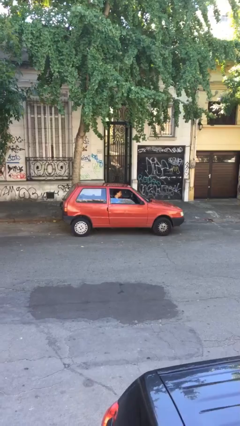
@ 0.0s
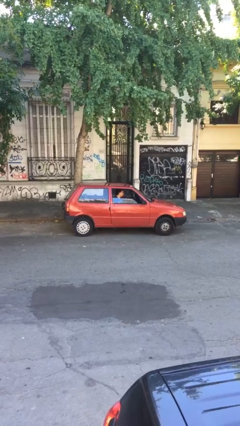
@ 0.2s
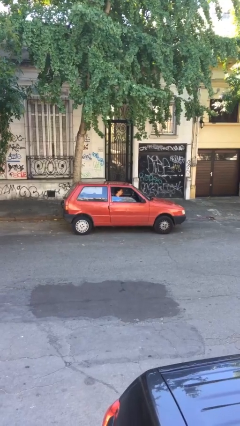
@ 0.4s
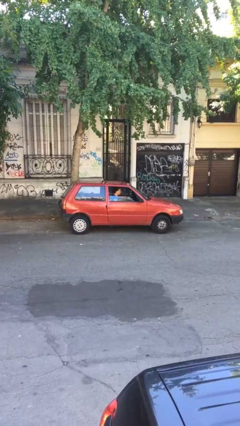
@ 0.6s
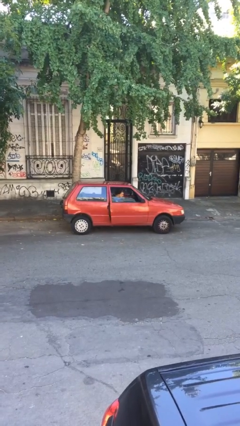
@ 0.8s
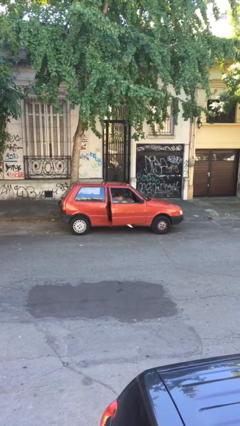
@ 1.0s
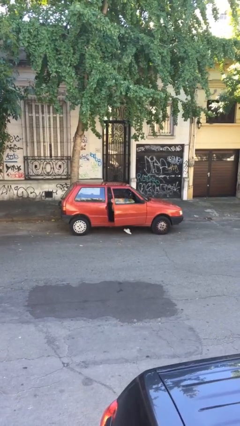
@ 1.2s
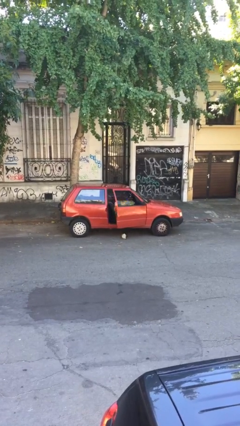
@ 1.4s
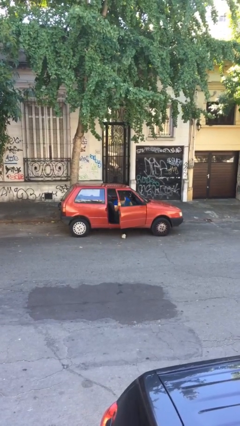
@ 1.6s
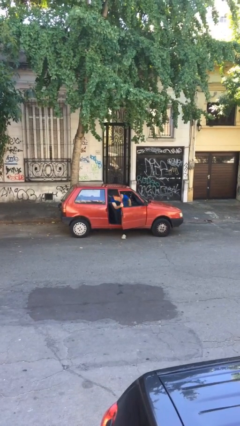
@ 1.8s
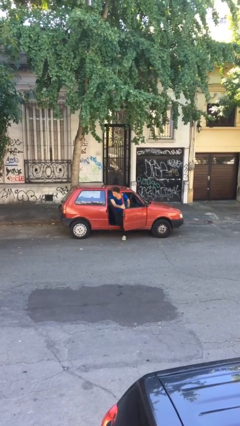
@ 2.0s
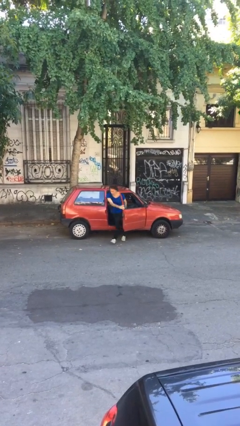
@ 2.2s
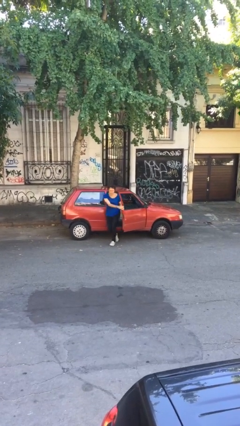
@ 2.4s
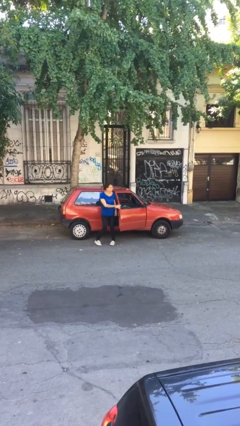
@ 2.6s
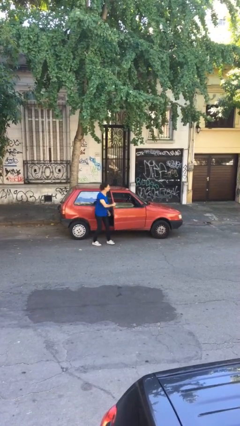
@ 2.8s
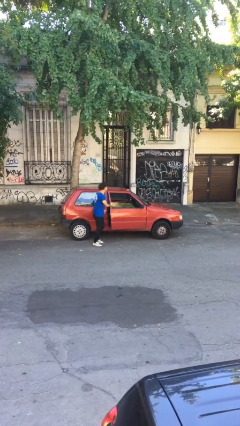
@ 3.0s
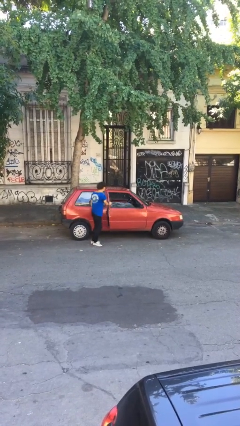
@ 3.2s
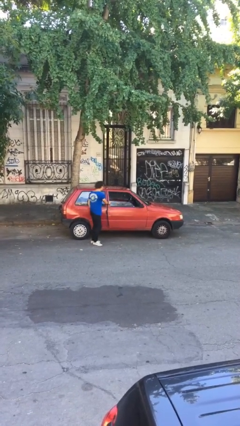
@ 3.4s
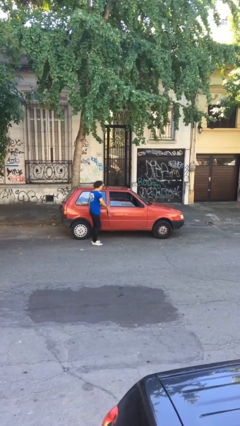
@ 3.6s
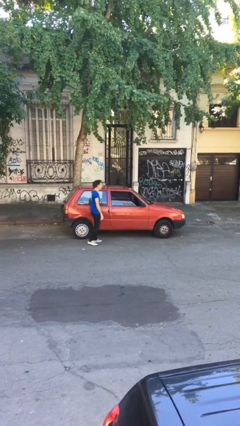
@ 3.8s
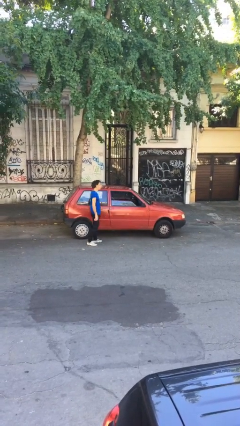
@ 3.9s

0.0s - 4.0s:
car drops off person

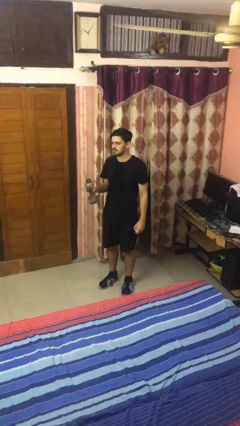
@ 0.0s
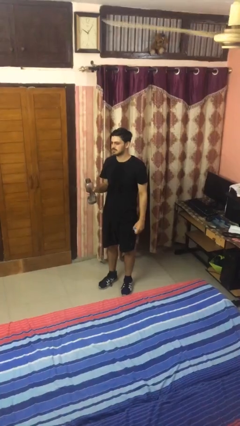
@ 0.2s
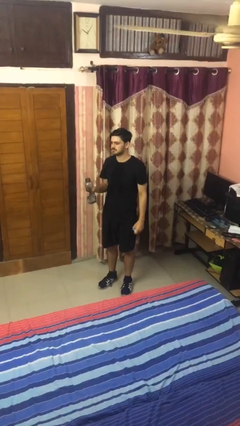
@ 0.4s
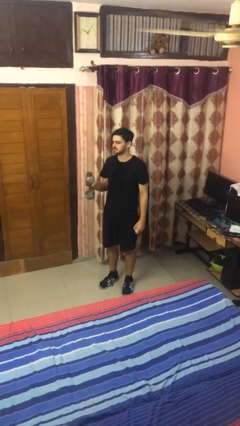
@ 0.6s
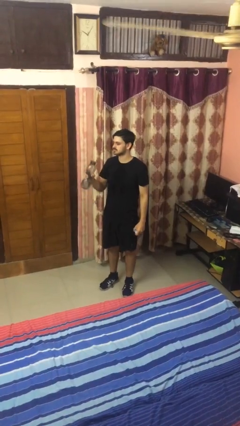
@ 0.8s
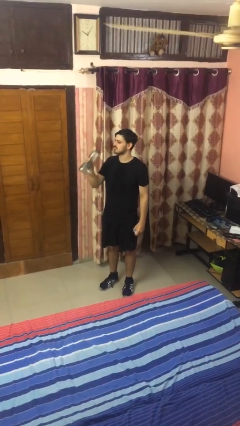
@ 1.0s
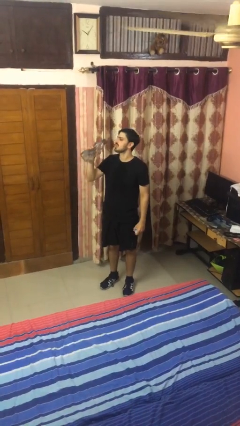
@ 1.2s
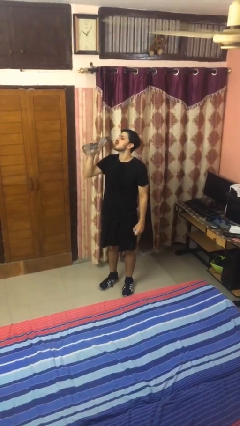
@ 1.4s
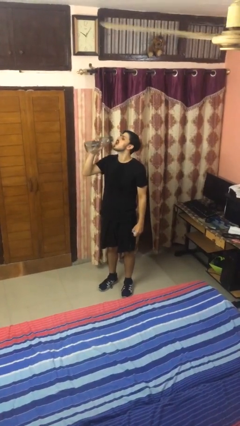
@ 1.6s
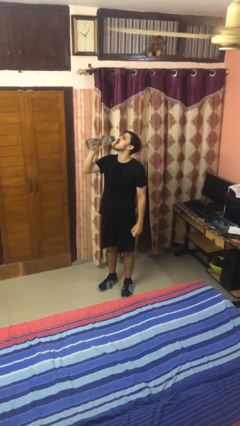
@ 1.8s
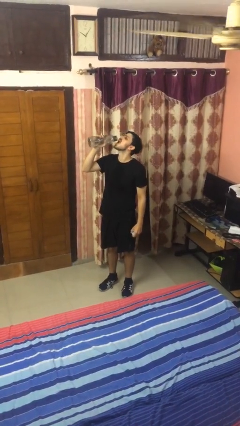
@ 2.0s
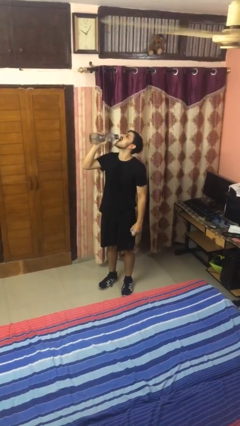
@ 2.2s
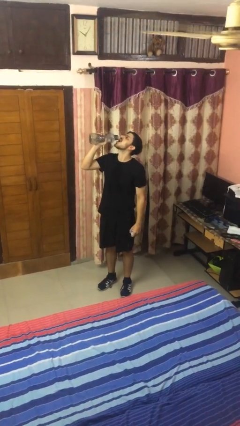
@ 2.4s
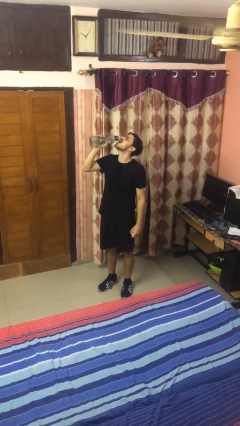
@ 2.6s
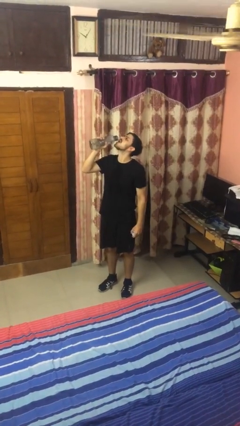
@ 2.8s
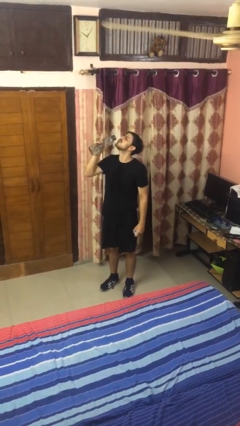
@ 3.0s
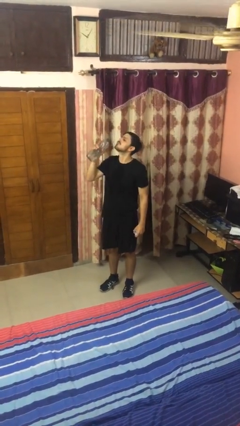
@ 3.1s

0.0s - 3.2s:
person drinks from bottle

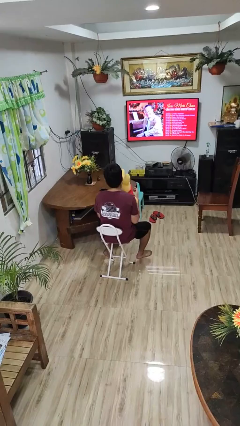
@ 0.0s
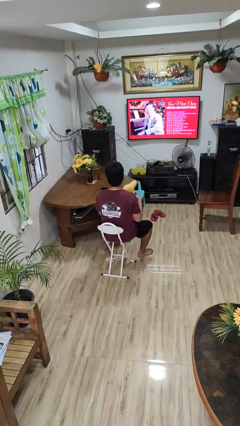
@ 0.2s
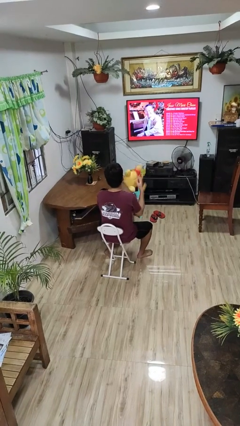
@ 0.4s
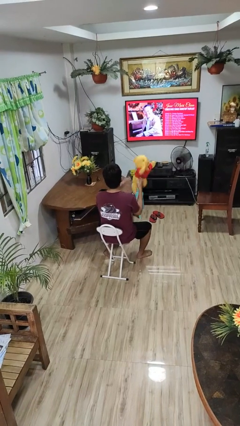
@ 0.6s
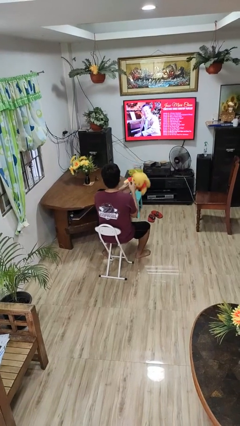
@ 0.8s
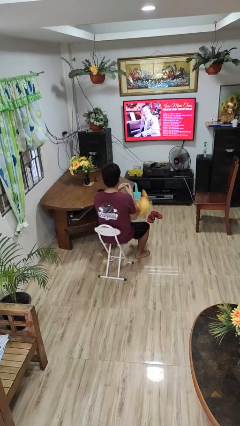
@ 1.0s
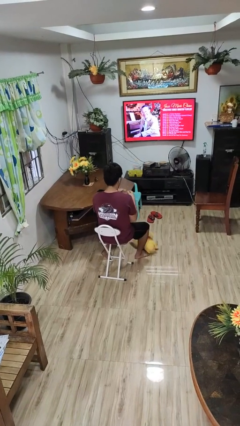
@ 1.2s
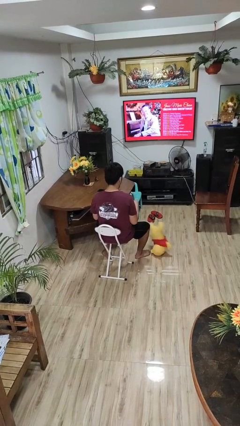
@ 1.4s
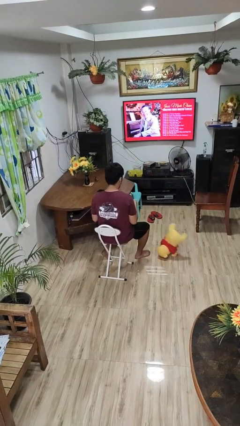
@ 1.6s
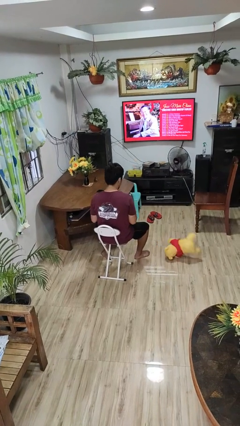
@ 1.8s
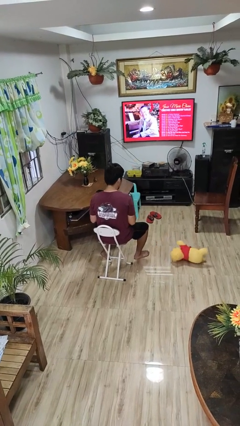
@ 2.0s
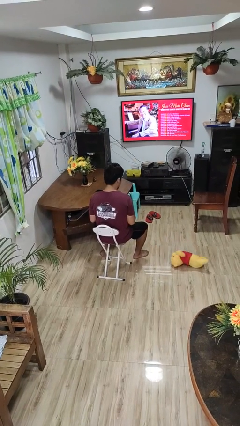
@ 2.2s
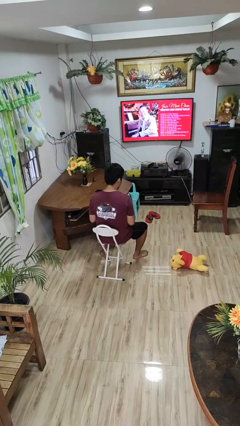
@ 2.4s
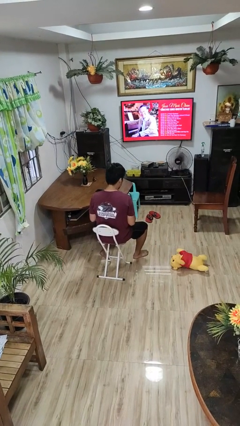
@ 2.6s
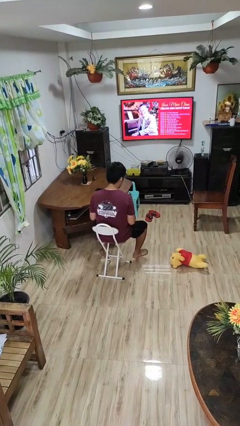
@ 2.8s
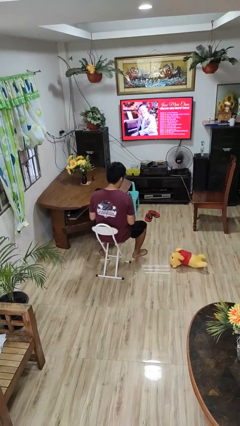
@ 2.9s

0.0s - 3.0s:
person drops object

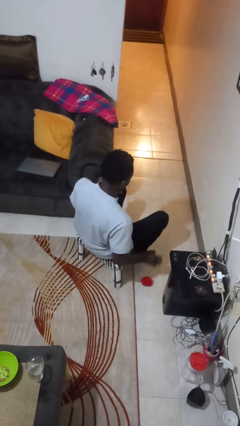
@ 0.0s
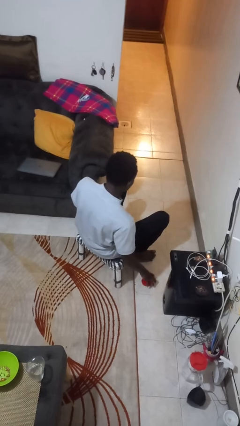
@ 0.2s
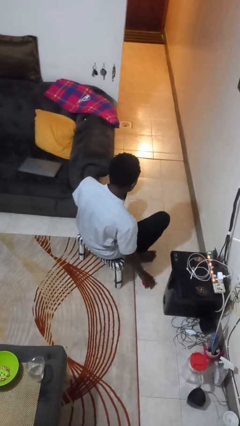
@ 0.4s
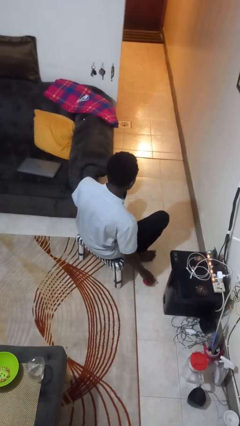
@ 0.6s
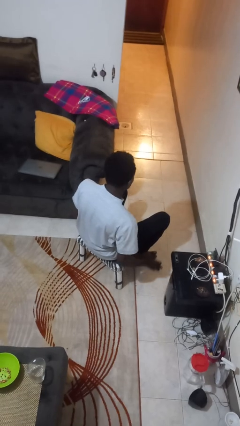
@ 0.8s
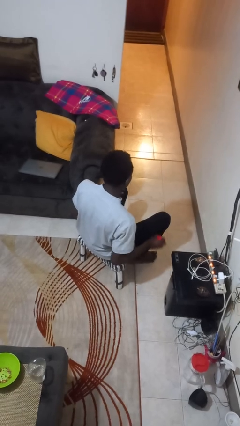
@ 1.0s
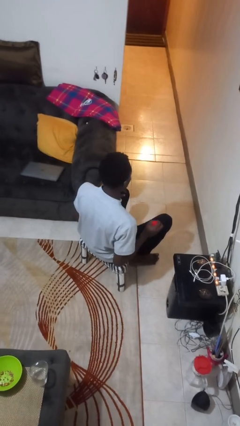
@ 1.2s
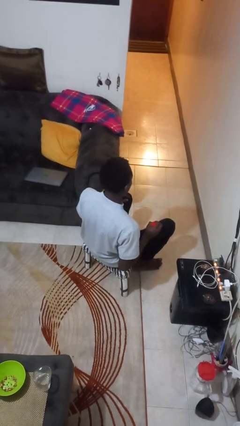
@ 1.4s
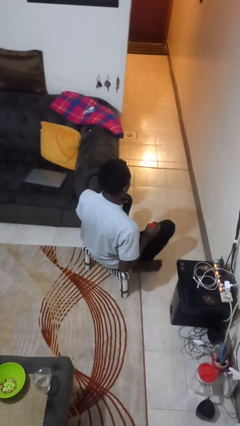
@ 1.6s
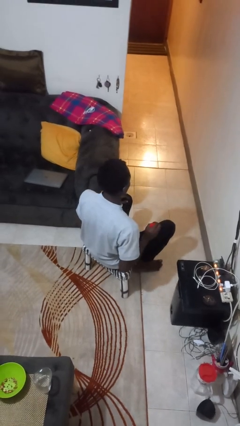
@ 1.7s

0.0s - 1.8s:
person picks up object from floor

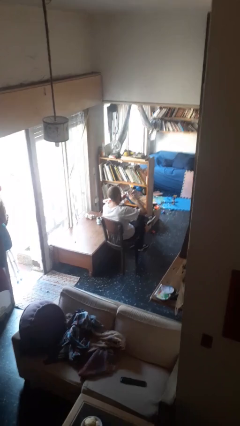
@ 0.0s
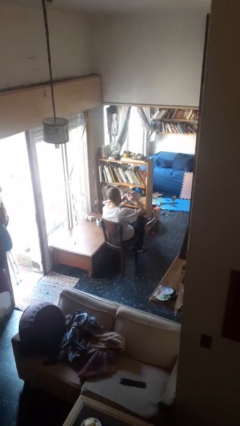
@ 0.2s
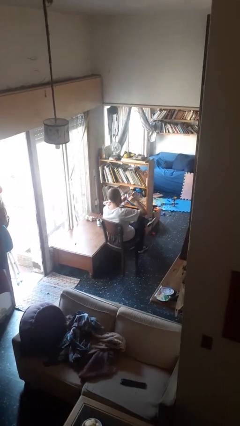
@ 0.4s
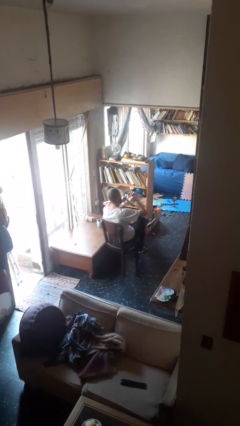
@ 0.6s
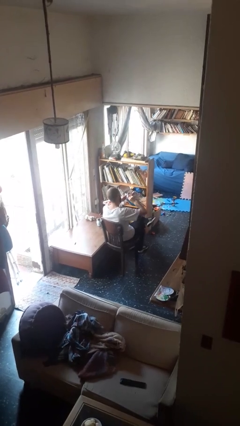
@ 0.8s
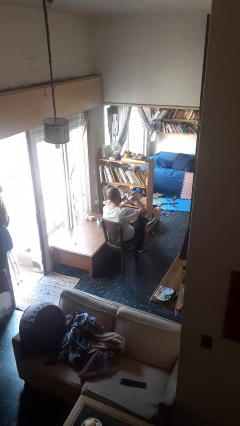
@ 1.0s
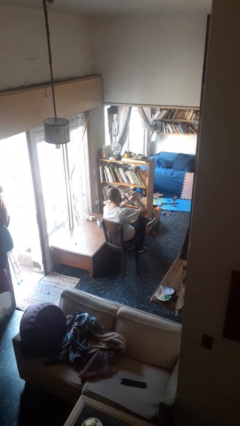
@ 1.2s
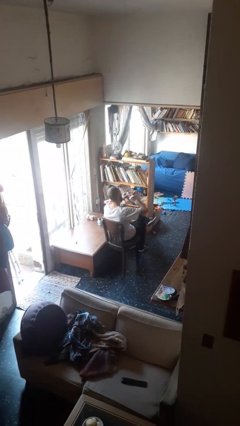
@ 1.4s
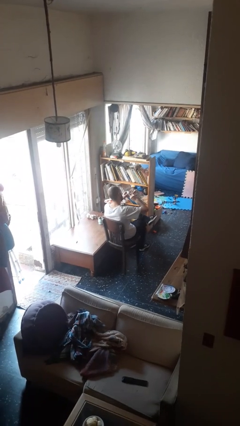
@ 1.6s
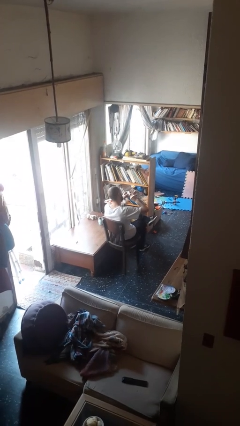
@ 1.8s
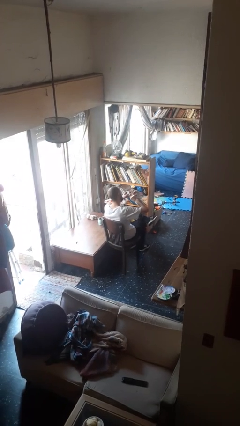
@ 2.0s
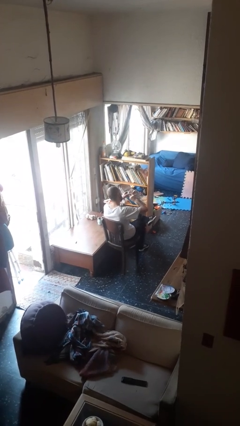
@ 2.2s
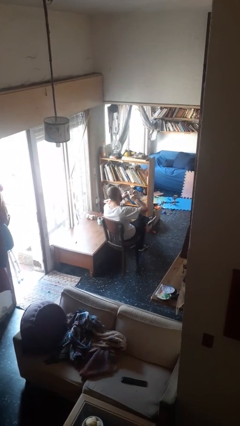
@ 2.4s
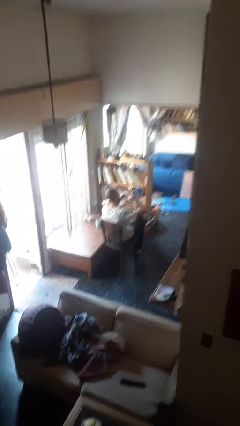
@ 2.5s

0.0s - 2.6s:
person clips fingernails

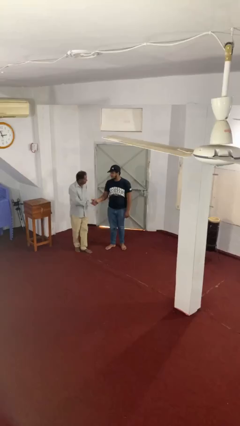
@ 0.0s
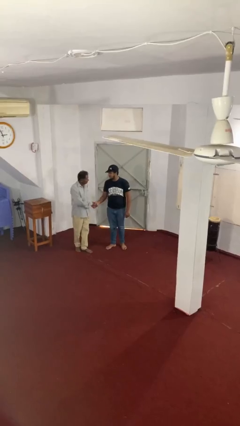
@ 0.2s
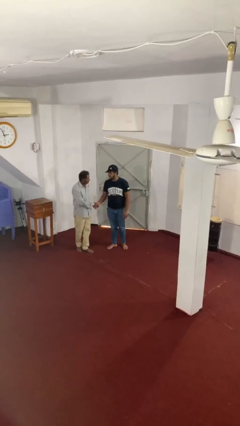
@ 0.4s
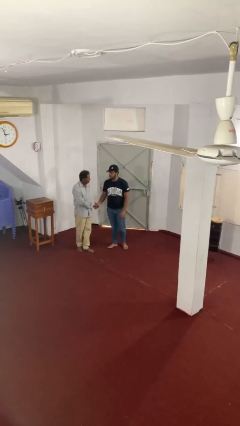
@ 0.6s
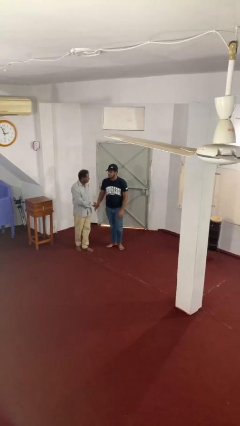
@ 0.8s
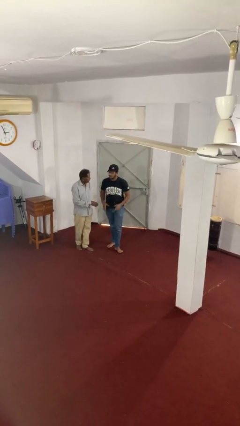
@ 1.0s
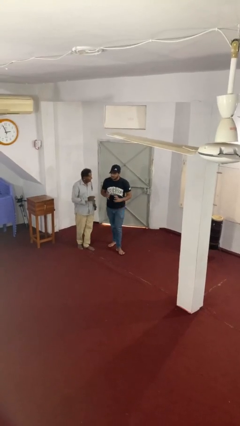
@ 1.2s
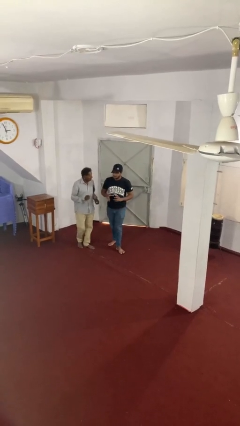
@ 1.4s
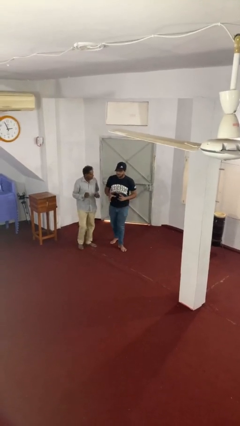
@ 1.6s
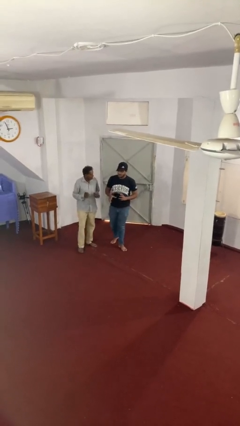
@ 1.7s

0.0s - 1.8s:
person shakes hand

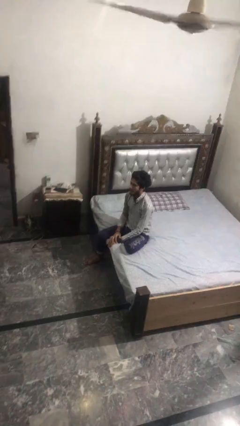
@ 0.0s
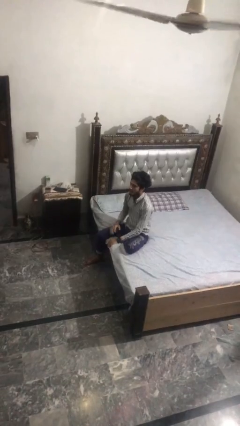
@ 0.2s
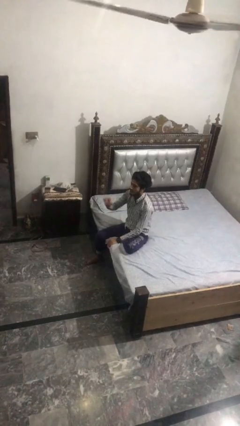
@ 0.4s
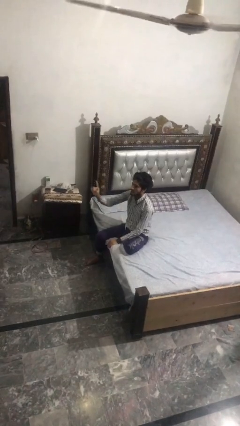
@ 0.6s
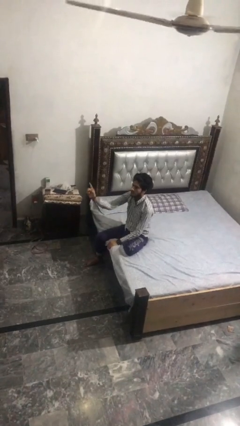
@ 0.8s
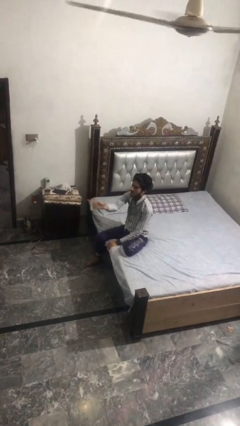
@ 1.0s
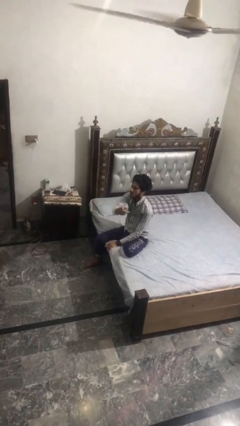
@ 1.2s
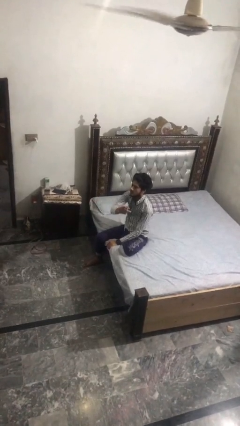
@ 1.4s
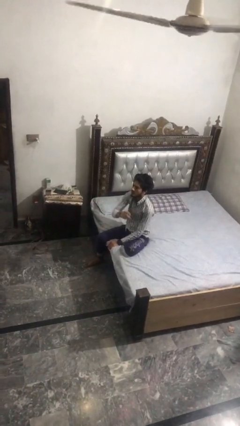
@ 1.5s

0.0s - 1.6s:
person gestures swipe left
